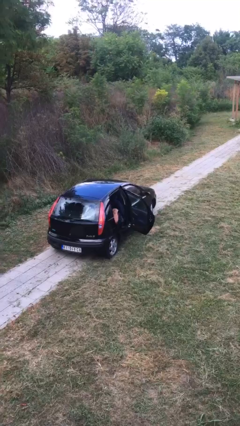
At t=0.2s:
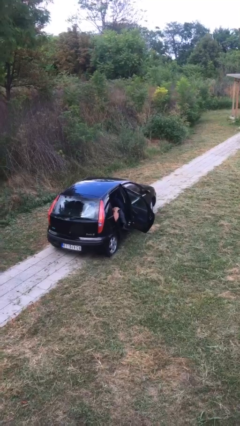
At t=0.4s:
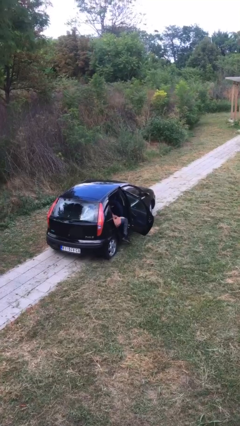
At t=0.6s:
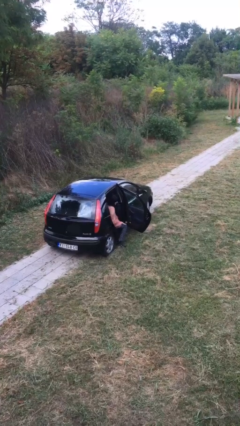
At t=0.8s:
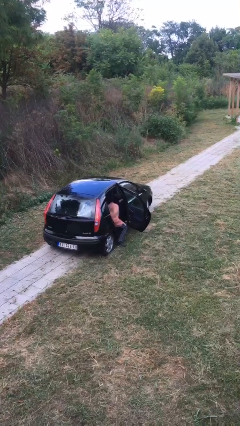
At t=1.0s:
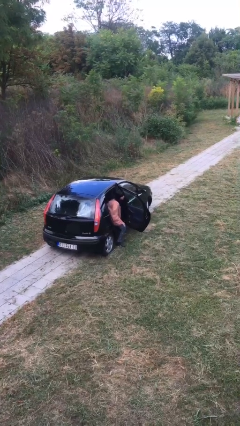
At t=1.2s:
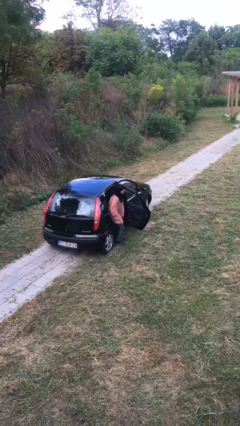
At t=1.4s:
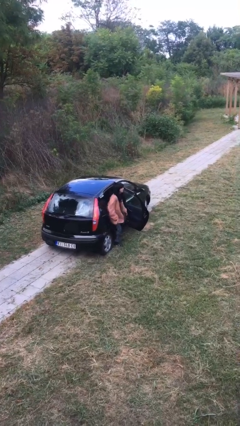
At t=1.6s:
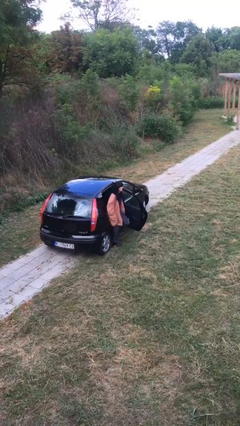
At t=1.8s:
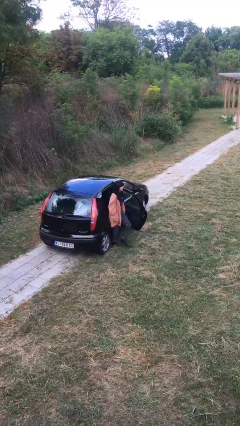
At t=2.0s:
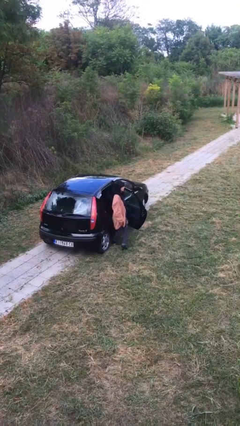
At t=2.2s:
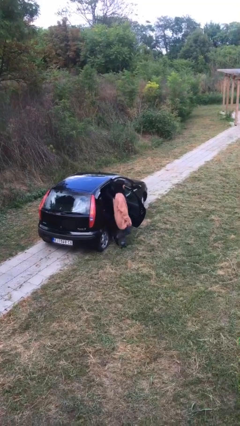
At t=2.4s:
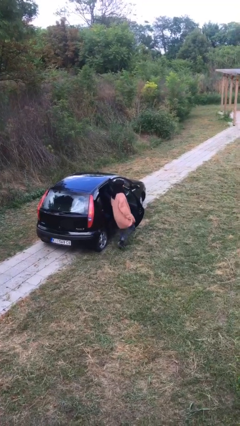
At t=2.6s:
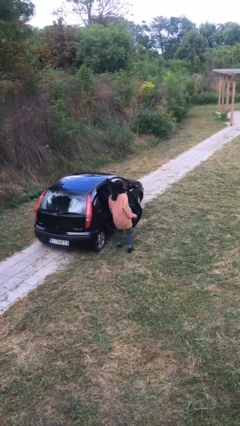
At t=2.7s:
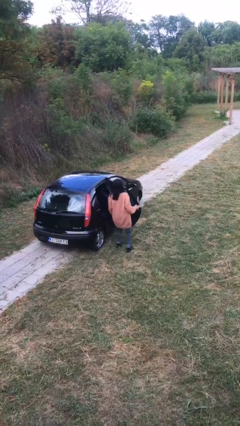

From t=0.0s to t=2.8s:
person exits car

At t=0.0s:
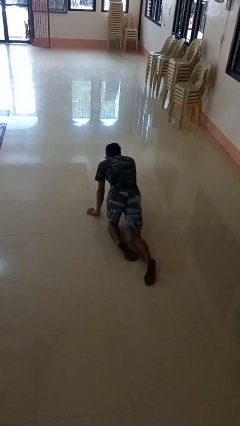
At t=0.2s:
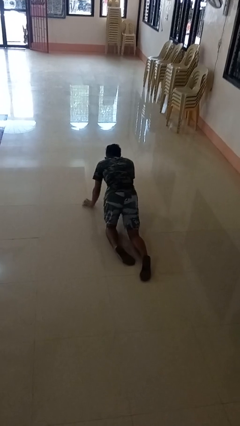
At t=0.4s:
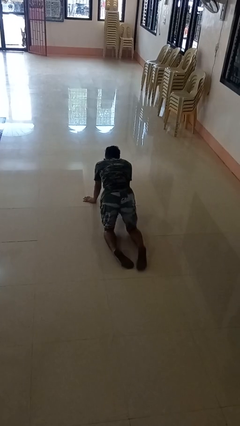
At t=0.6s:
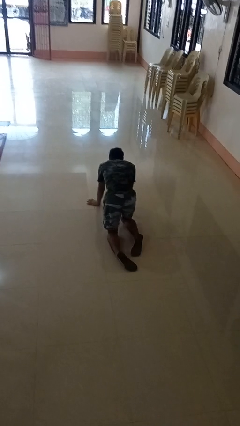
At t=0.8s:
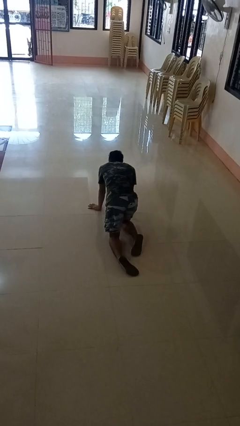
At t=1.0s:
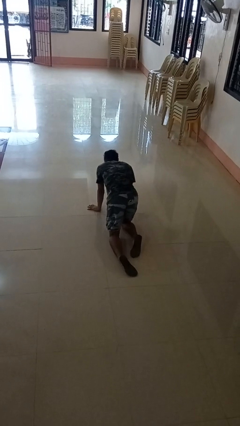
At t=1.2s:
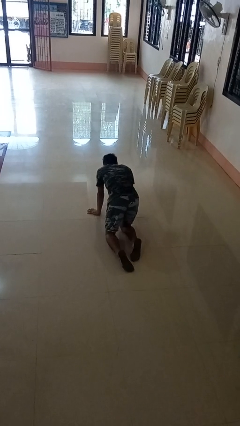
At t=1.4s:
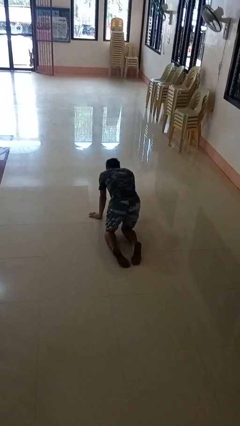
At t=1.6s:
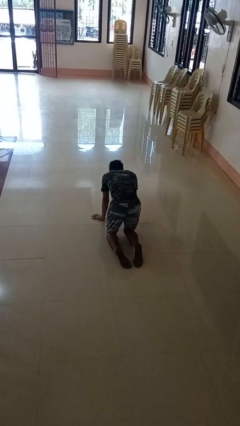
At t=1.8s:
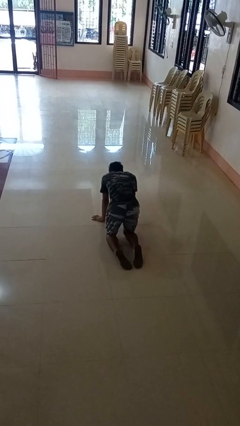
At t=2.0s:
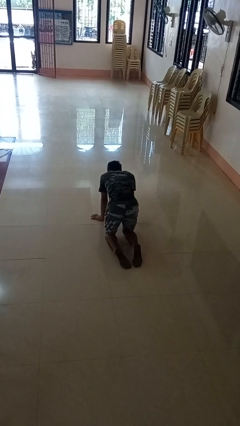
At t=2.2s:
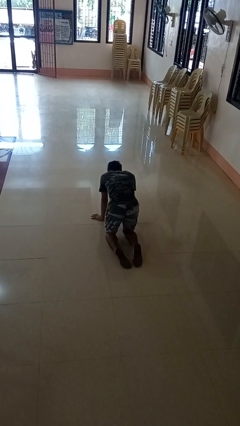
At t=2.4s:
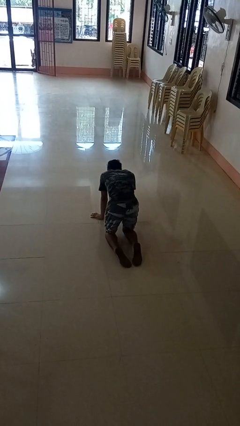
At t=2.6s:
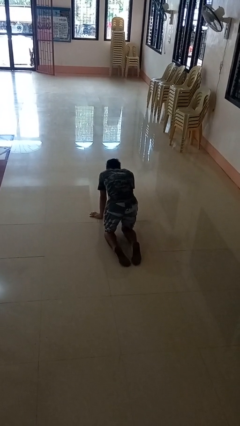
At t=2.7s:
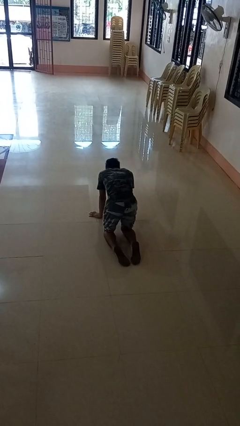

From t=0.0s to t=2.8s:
person crawls

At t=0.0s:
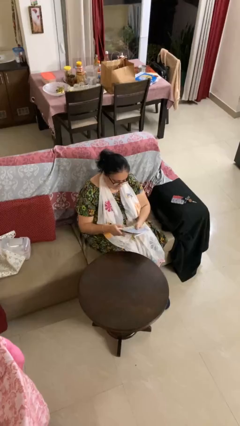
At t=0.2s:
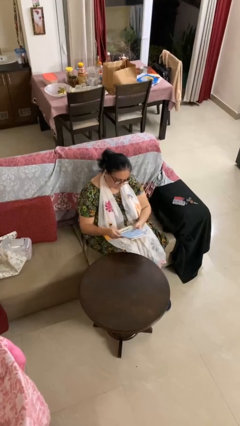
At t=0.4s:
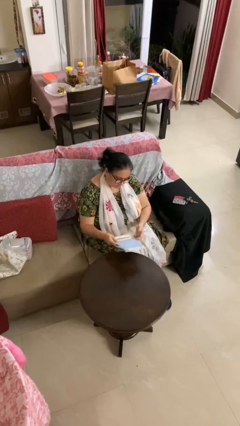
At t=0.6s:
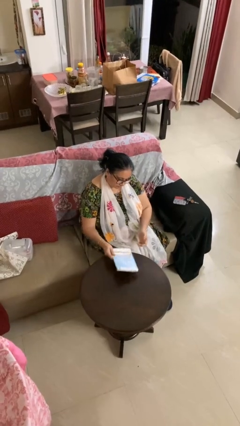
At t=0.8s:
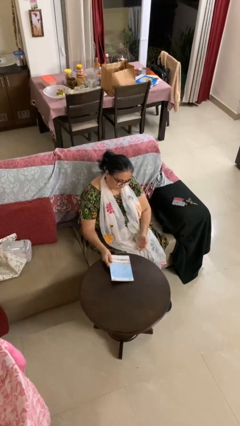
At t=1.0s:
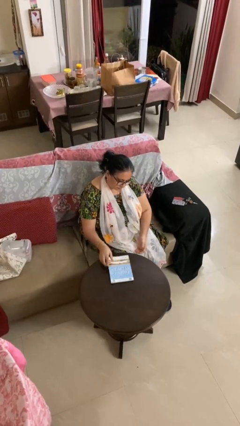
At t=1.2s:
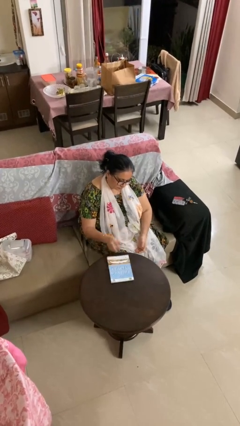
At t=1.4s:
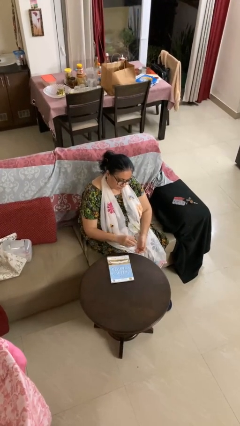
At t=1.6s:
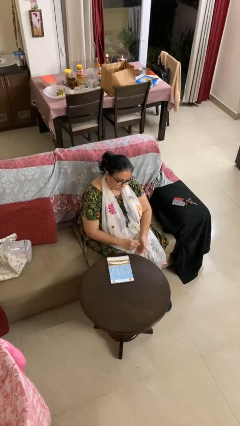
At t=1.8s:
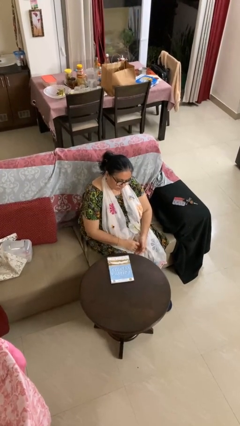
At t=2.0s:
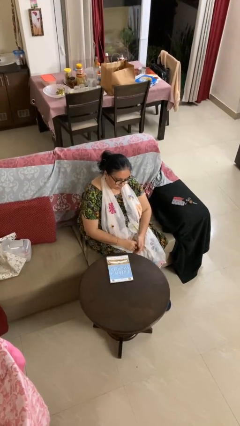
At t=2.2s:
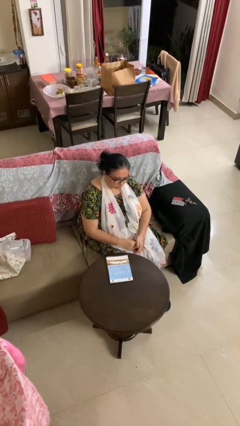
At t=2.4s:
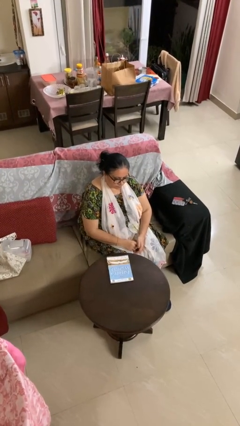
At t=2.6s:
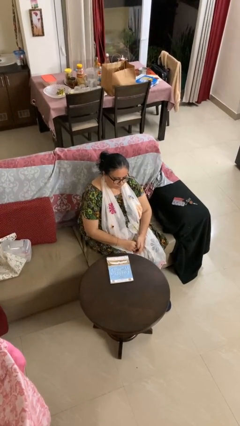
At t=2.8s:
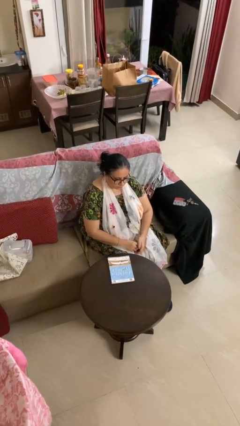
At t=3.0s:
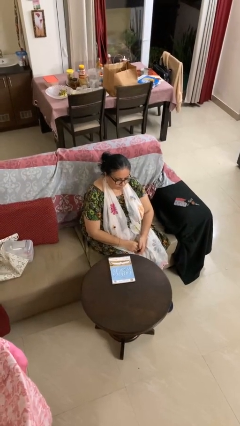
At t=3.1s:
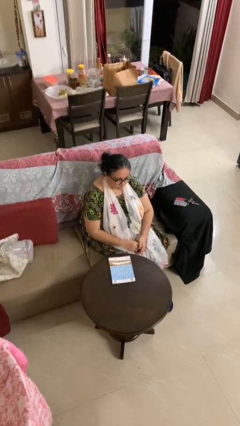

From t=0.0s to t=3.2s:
person puts down object on table

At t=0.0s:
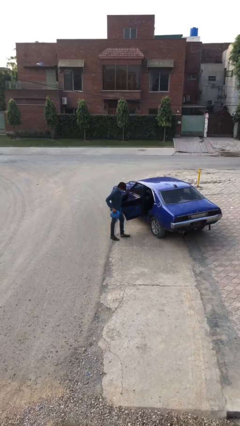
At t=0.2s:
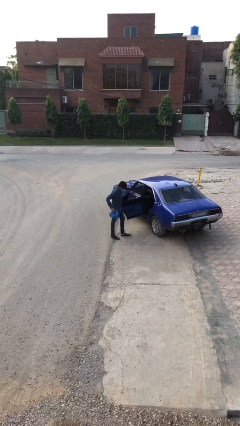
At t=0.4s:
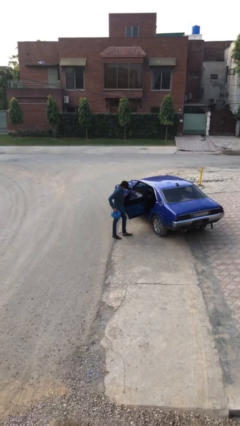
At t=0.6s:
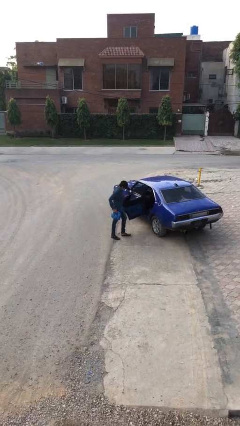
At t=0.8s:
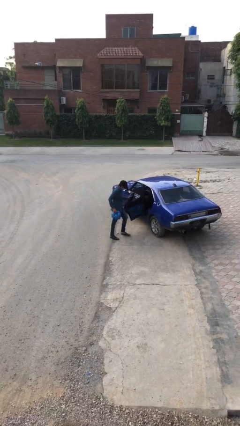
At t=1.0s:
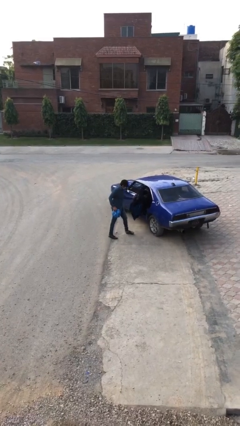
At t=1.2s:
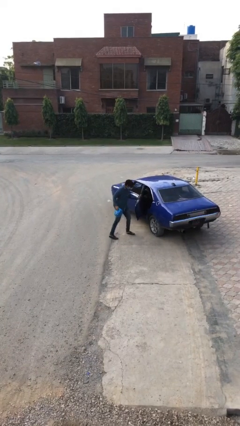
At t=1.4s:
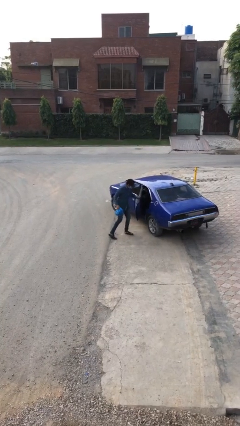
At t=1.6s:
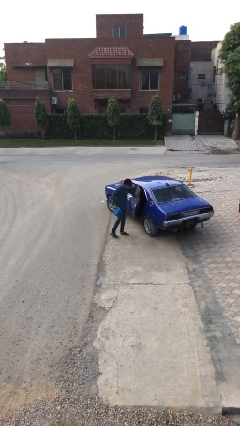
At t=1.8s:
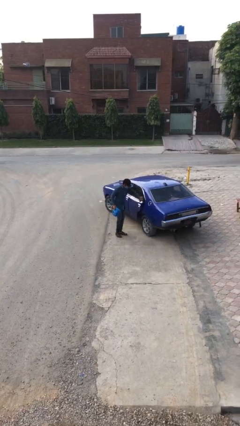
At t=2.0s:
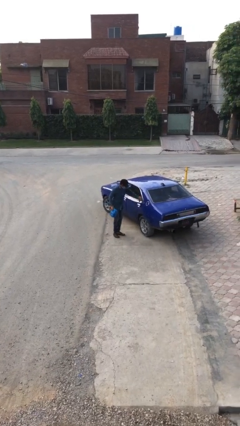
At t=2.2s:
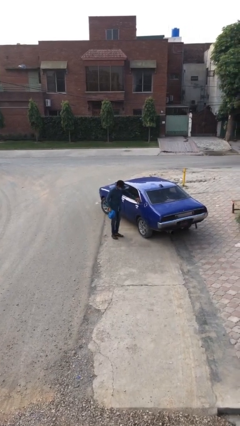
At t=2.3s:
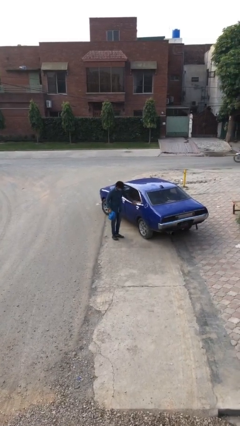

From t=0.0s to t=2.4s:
person closes car door

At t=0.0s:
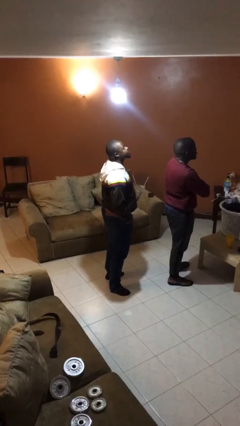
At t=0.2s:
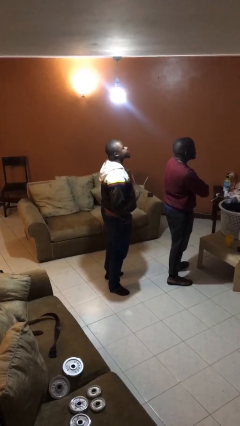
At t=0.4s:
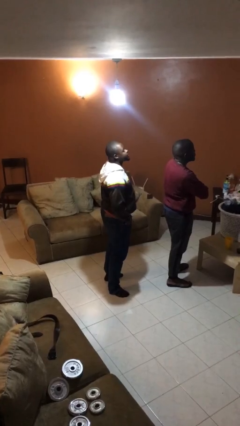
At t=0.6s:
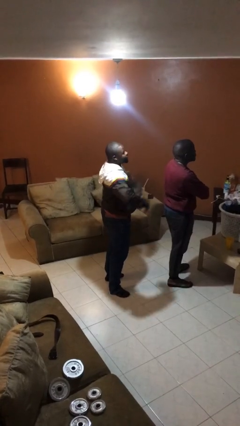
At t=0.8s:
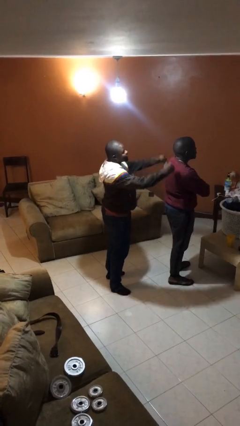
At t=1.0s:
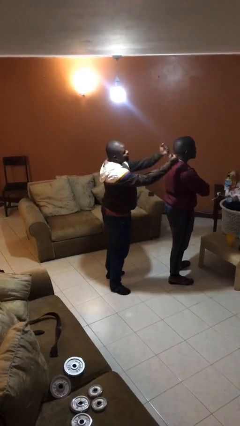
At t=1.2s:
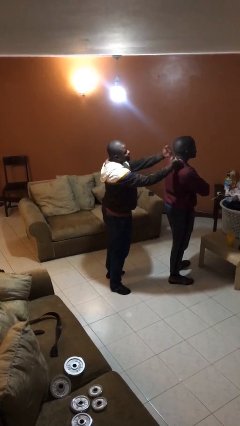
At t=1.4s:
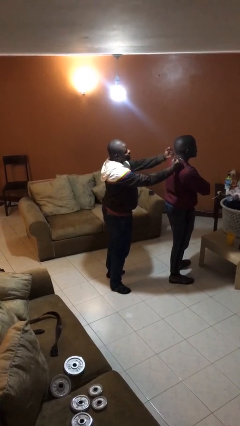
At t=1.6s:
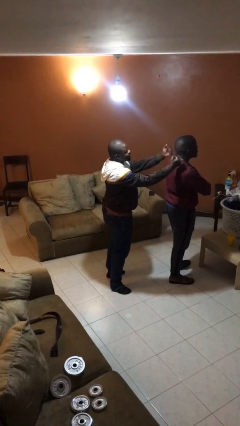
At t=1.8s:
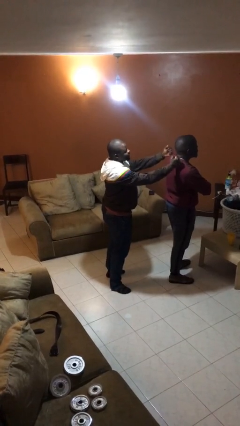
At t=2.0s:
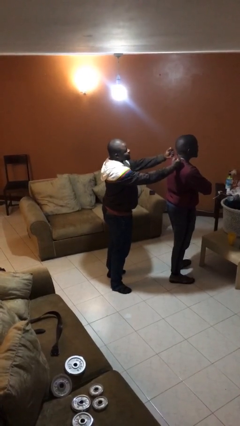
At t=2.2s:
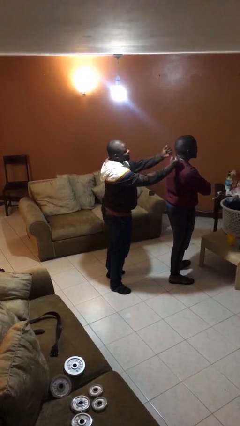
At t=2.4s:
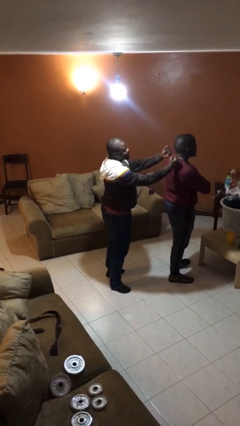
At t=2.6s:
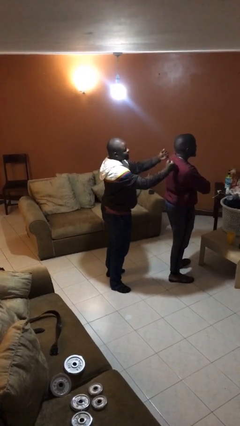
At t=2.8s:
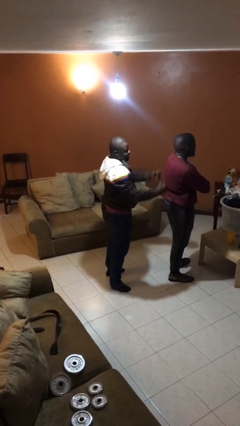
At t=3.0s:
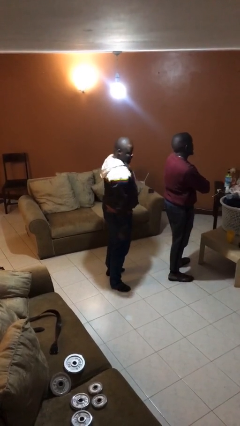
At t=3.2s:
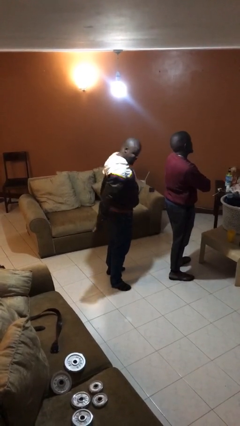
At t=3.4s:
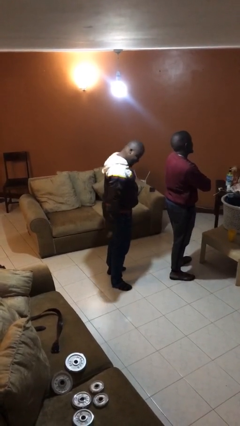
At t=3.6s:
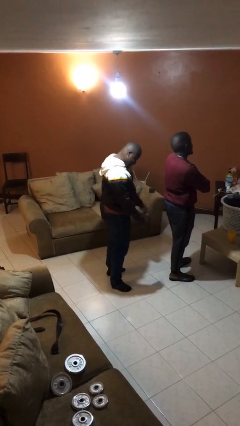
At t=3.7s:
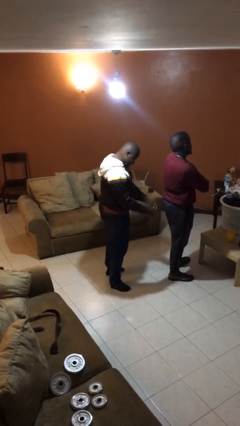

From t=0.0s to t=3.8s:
person touches back of person

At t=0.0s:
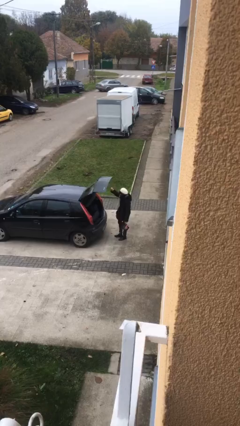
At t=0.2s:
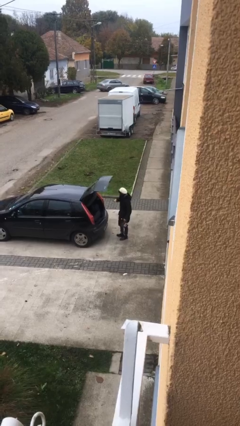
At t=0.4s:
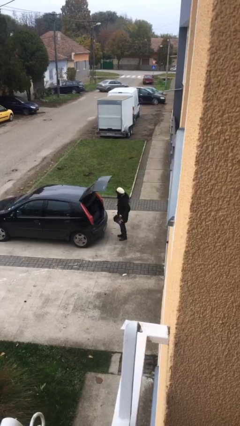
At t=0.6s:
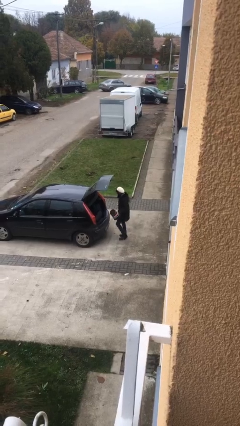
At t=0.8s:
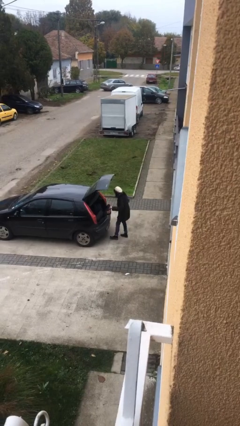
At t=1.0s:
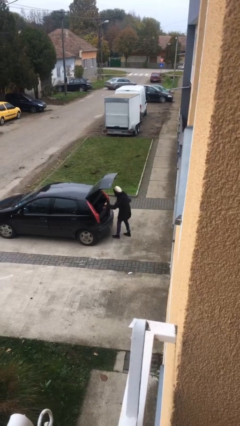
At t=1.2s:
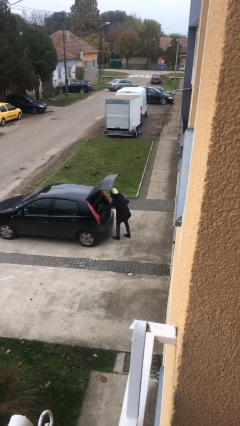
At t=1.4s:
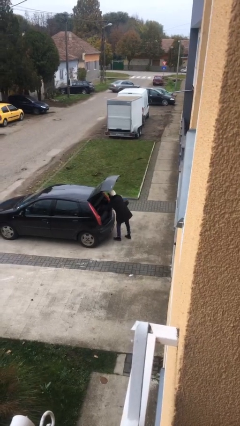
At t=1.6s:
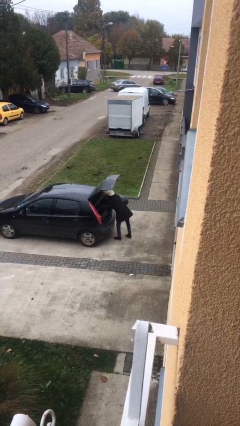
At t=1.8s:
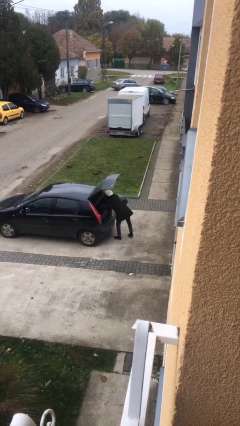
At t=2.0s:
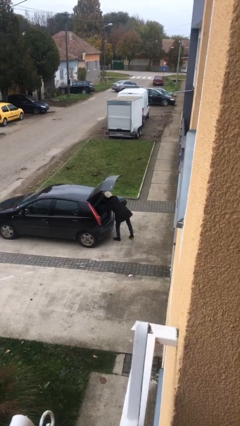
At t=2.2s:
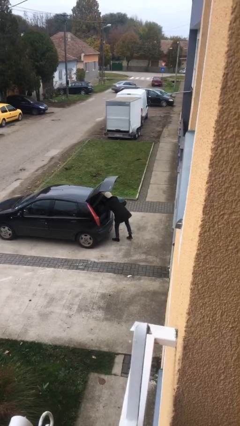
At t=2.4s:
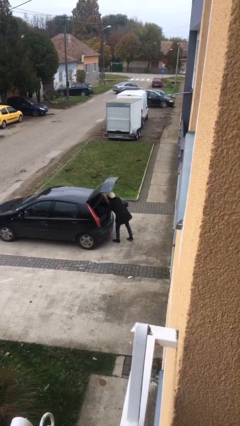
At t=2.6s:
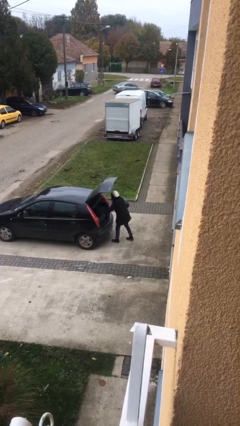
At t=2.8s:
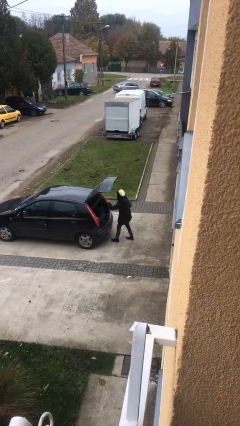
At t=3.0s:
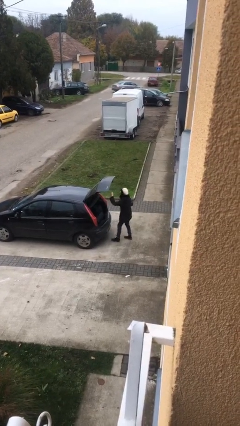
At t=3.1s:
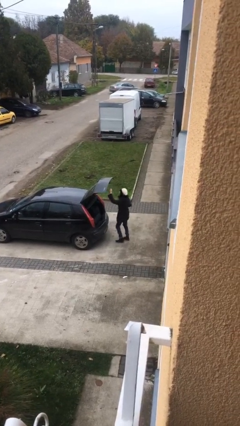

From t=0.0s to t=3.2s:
person loads car
